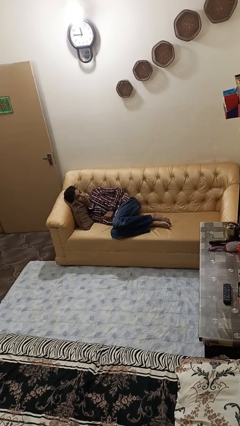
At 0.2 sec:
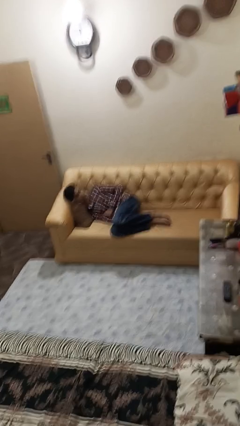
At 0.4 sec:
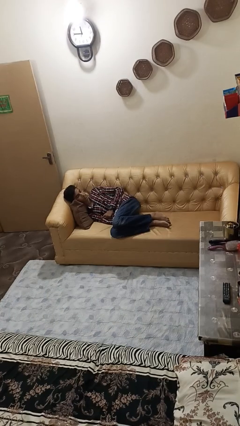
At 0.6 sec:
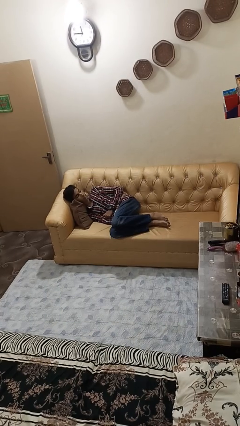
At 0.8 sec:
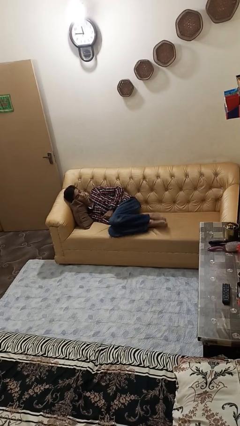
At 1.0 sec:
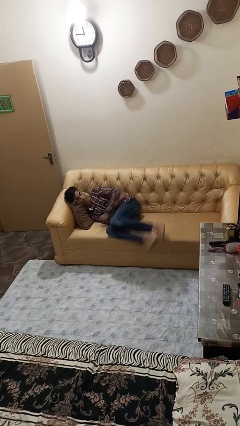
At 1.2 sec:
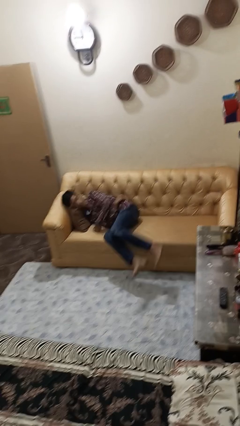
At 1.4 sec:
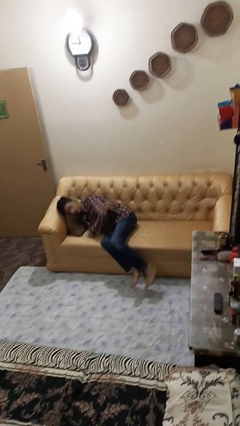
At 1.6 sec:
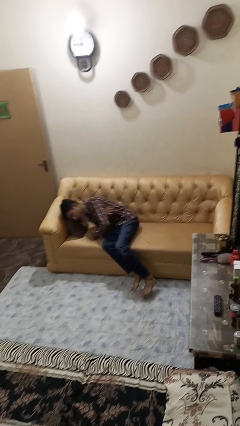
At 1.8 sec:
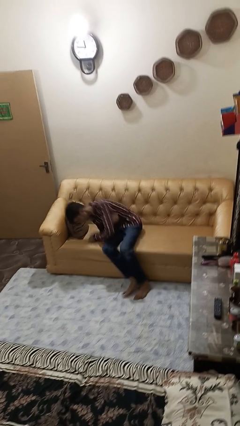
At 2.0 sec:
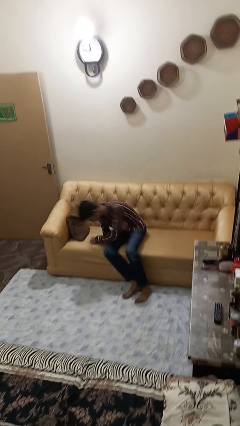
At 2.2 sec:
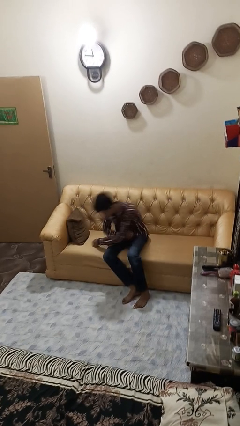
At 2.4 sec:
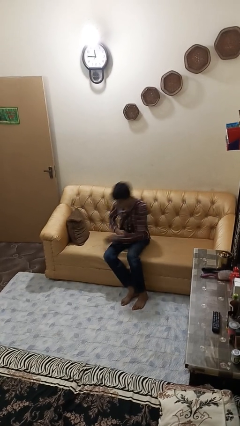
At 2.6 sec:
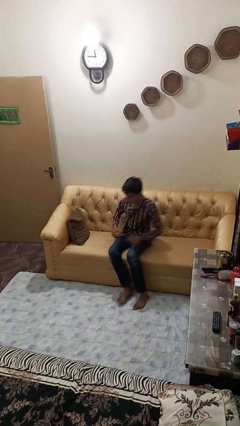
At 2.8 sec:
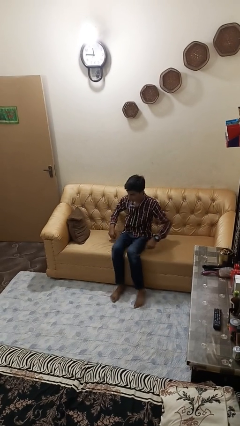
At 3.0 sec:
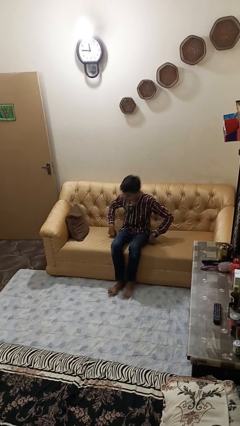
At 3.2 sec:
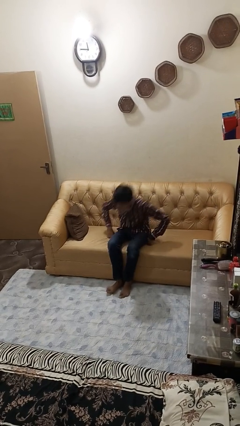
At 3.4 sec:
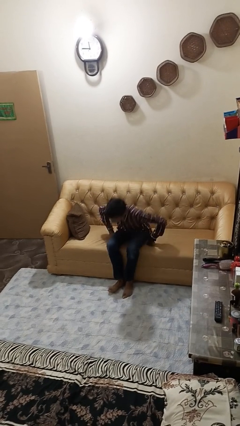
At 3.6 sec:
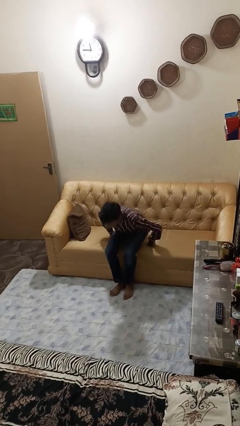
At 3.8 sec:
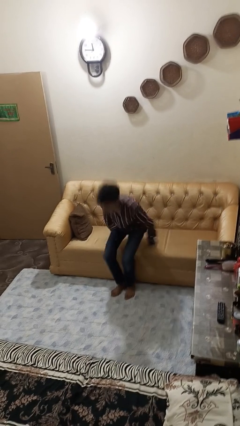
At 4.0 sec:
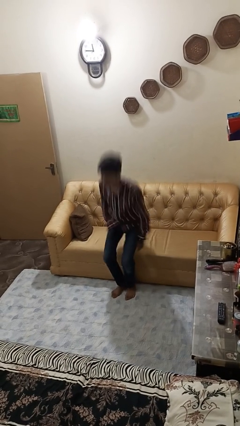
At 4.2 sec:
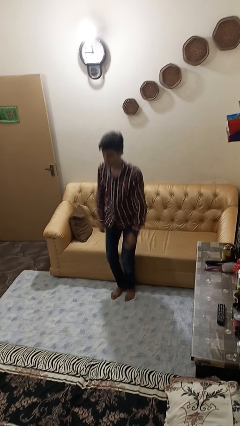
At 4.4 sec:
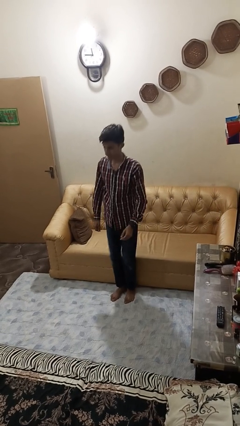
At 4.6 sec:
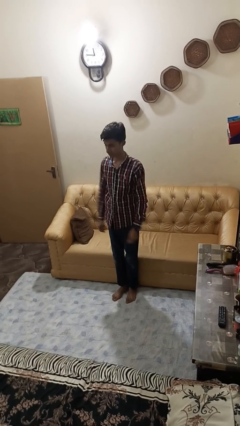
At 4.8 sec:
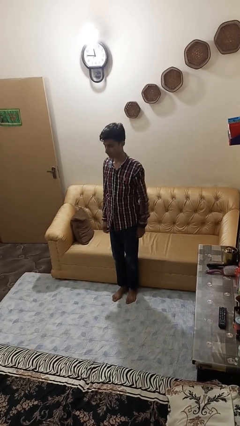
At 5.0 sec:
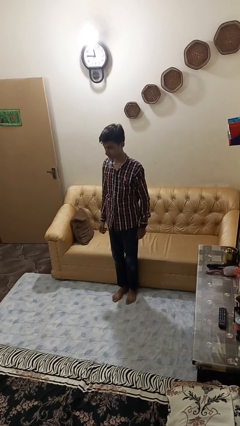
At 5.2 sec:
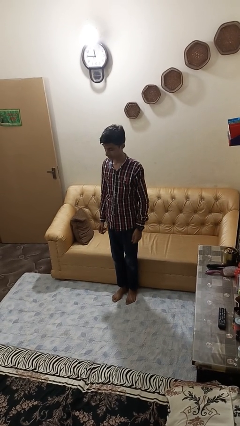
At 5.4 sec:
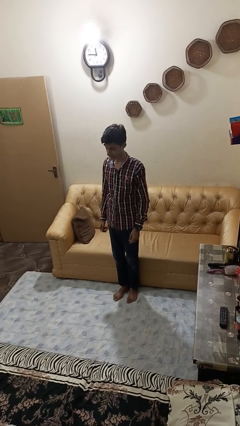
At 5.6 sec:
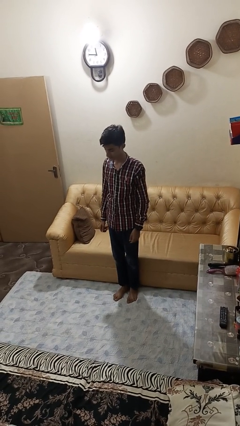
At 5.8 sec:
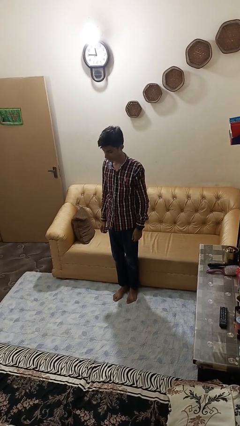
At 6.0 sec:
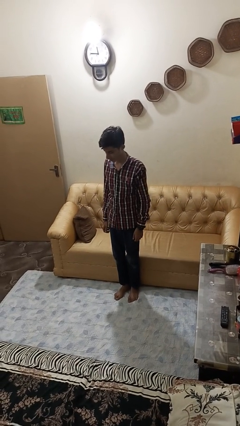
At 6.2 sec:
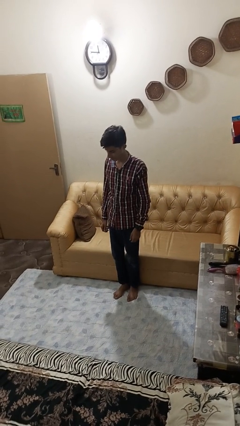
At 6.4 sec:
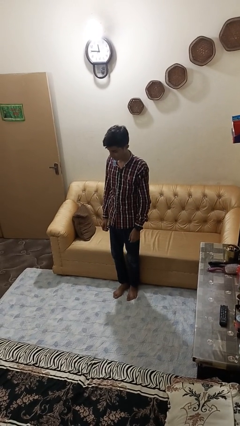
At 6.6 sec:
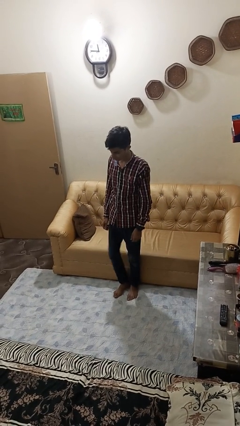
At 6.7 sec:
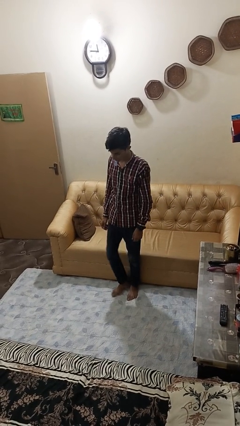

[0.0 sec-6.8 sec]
person stands up

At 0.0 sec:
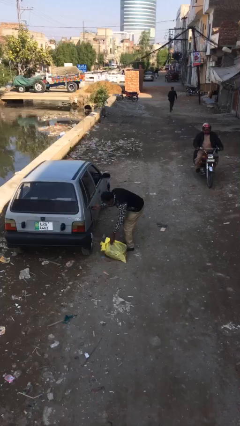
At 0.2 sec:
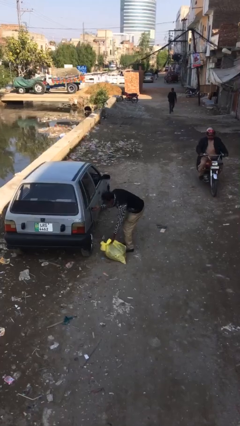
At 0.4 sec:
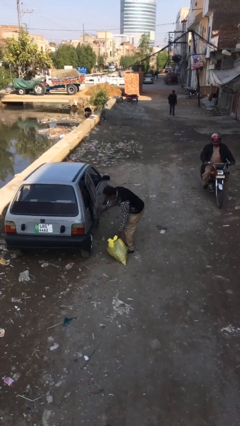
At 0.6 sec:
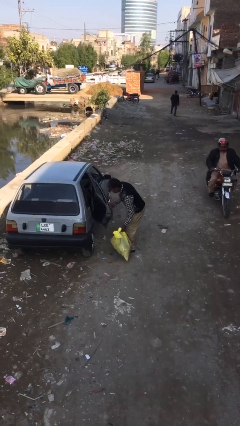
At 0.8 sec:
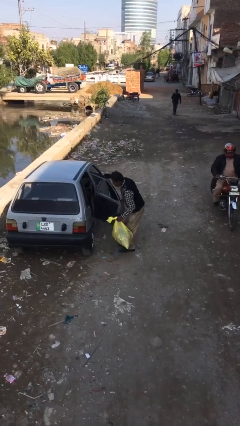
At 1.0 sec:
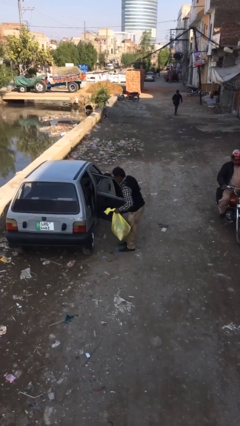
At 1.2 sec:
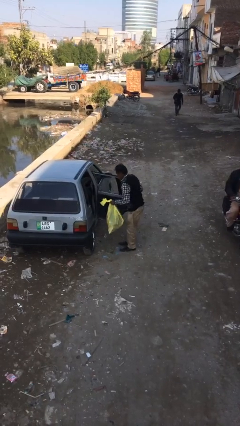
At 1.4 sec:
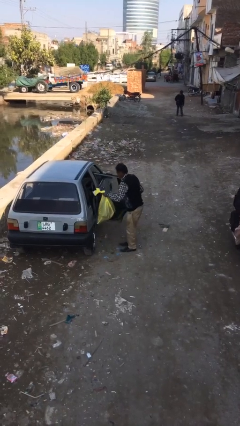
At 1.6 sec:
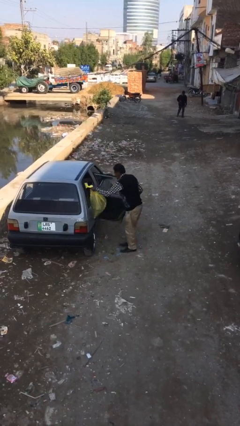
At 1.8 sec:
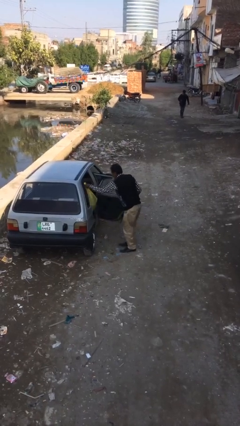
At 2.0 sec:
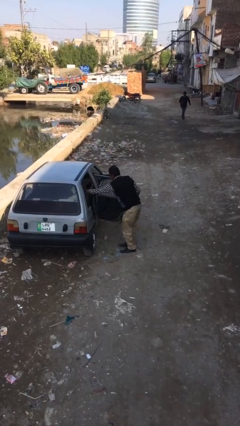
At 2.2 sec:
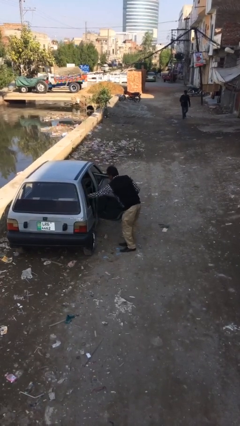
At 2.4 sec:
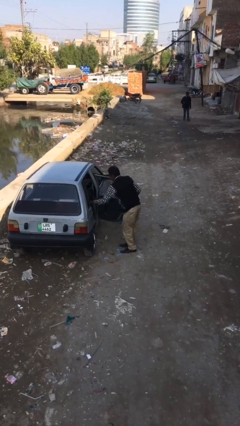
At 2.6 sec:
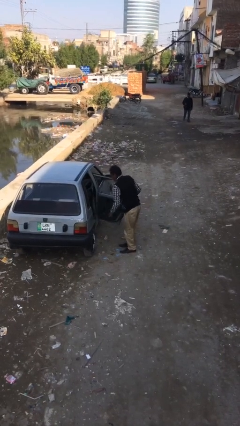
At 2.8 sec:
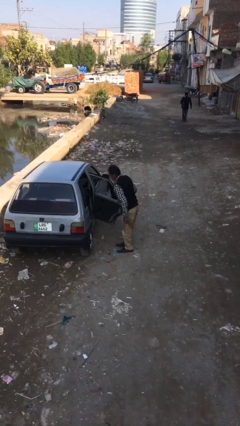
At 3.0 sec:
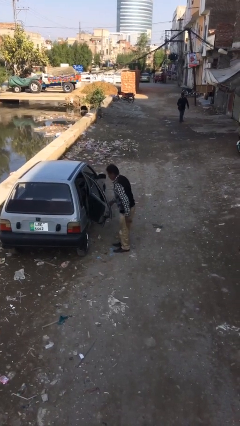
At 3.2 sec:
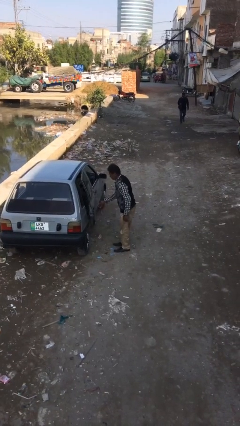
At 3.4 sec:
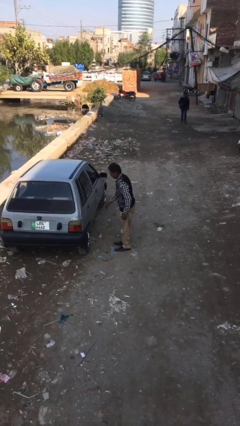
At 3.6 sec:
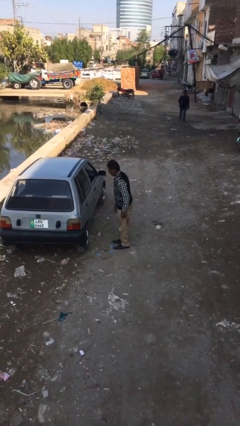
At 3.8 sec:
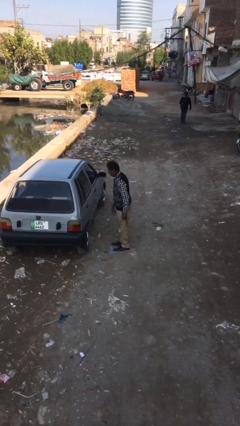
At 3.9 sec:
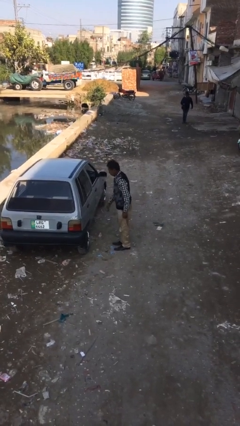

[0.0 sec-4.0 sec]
person loads car

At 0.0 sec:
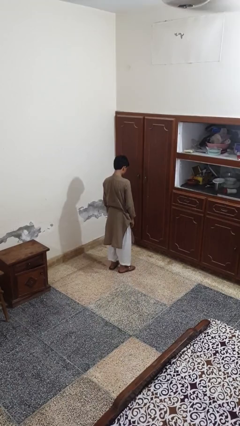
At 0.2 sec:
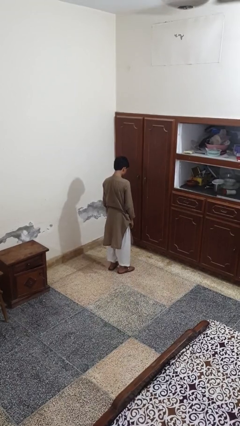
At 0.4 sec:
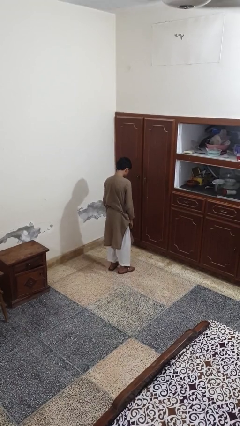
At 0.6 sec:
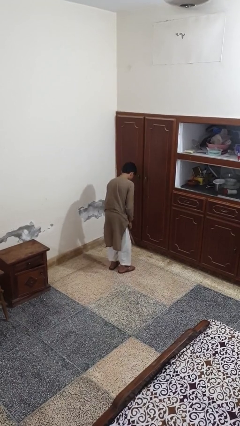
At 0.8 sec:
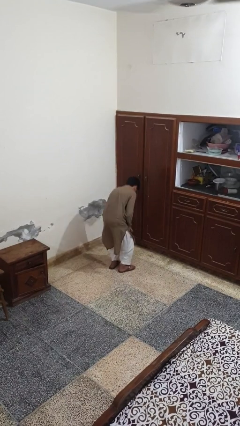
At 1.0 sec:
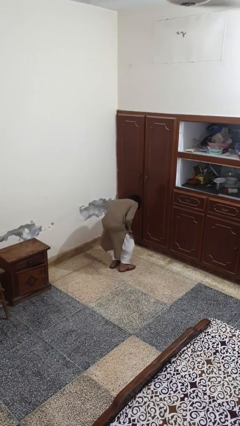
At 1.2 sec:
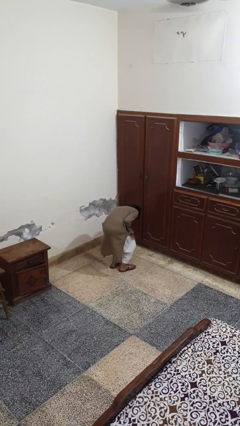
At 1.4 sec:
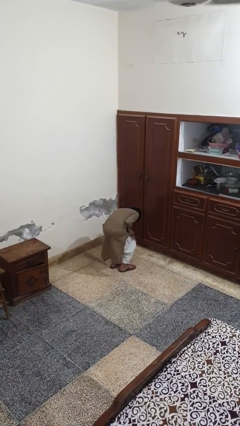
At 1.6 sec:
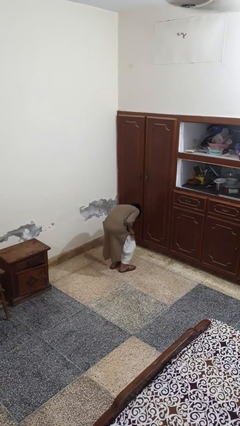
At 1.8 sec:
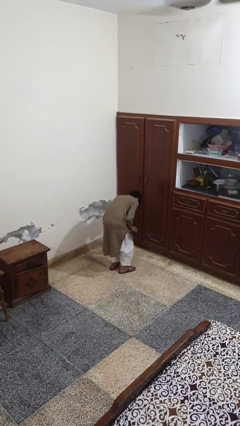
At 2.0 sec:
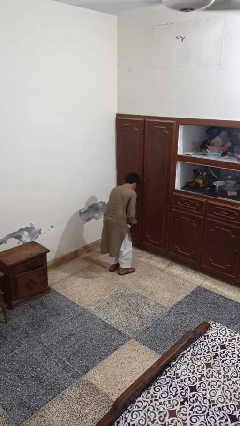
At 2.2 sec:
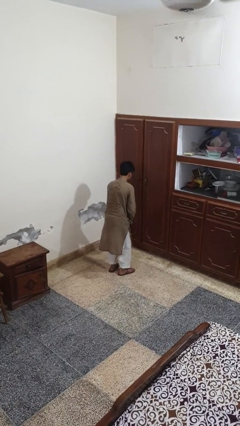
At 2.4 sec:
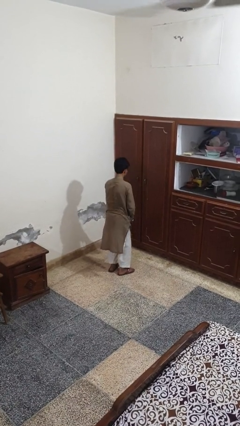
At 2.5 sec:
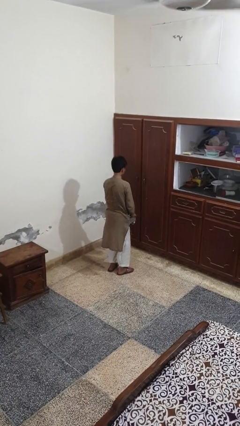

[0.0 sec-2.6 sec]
person picks up object from floor

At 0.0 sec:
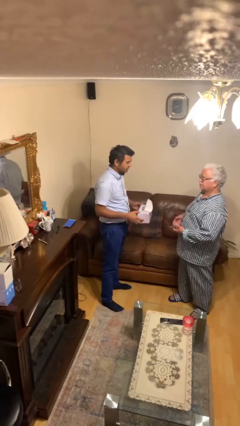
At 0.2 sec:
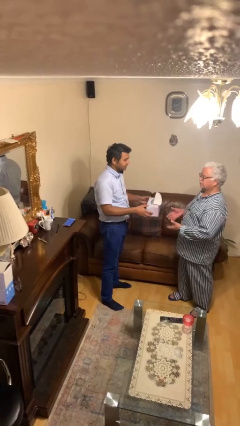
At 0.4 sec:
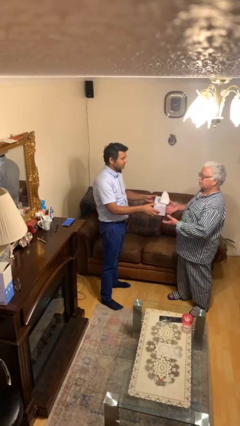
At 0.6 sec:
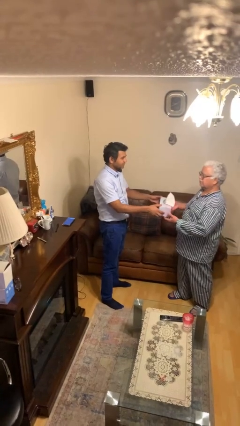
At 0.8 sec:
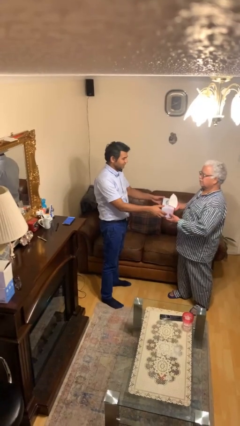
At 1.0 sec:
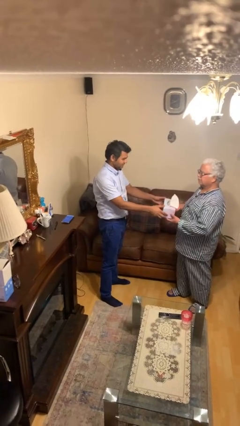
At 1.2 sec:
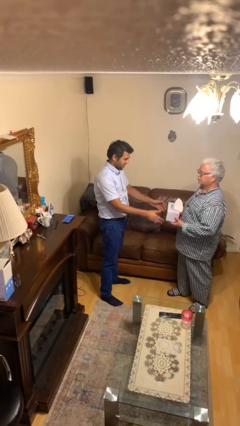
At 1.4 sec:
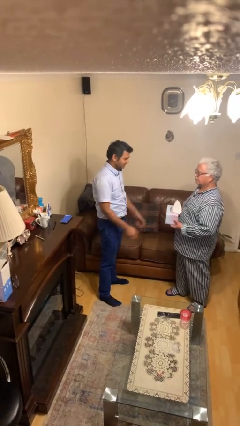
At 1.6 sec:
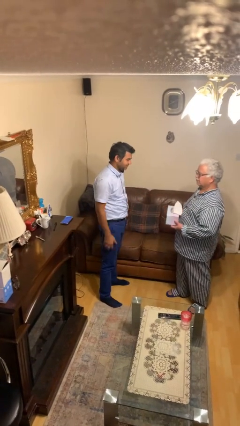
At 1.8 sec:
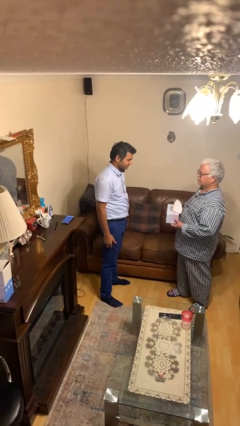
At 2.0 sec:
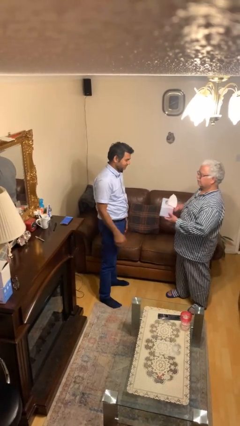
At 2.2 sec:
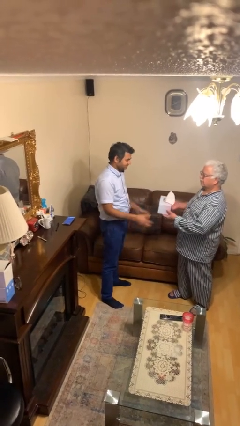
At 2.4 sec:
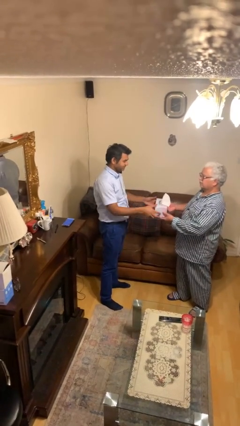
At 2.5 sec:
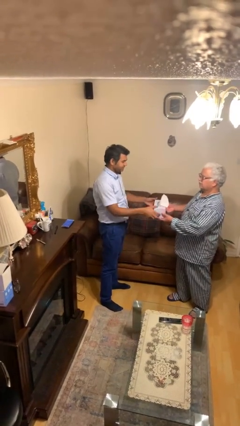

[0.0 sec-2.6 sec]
person transfers object to person

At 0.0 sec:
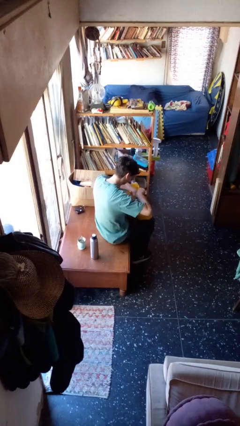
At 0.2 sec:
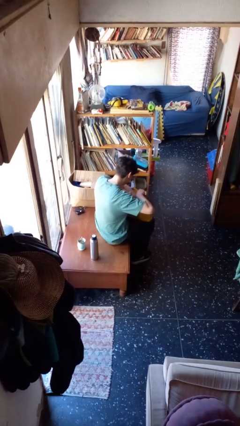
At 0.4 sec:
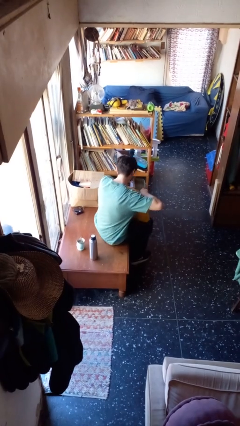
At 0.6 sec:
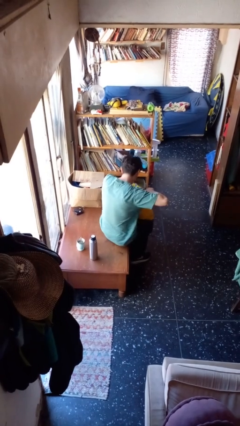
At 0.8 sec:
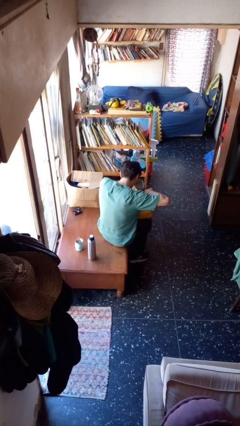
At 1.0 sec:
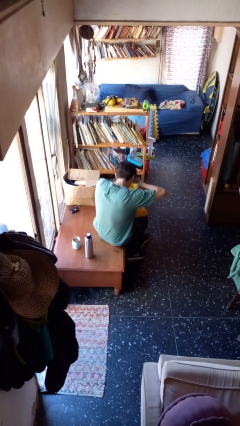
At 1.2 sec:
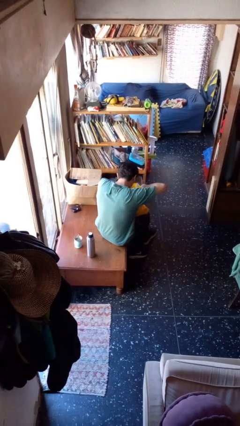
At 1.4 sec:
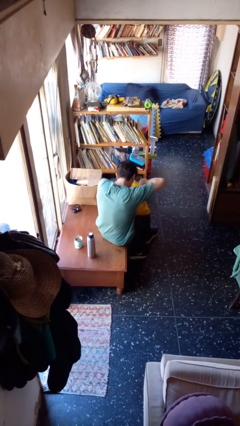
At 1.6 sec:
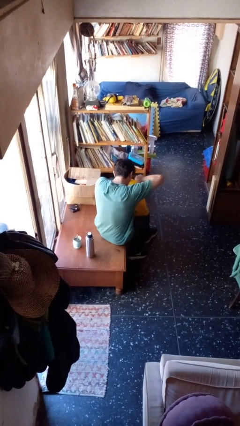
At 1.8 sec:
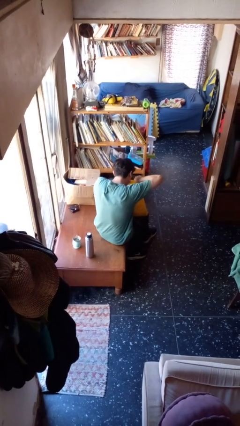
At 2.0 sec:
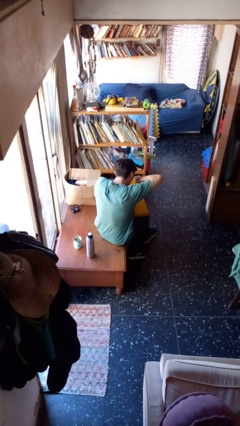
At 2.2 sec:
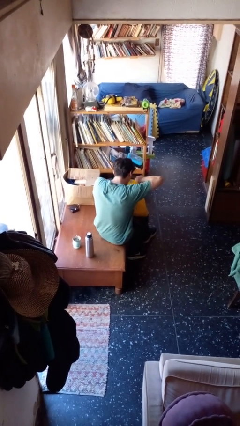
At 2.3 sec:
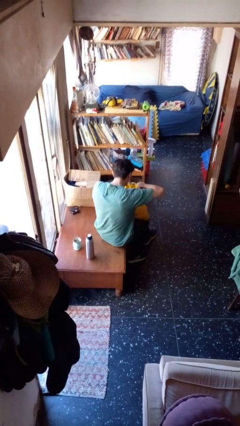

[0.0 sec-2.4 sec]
person searches in bag
